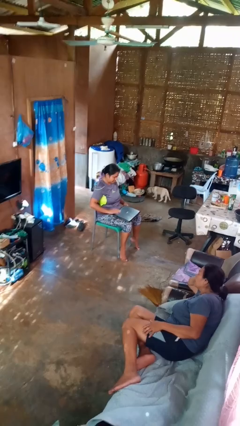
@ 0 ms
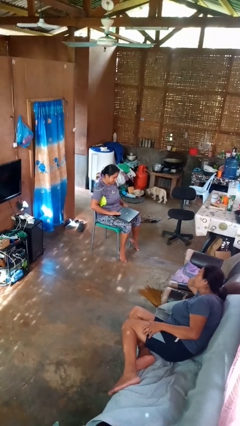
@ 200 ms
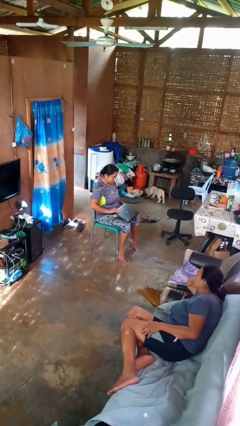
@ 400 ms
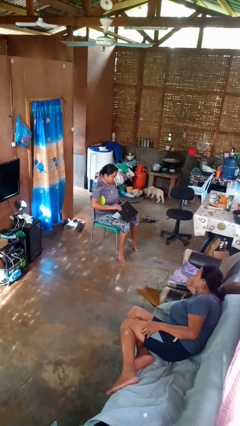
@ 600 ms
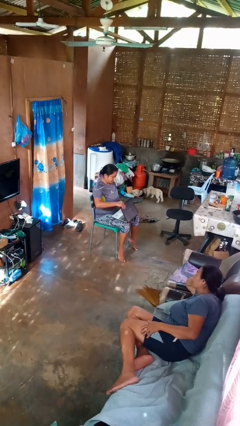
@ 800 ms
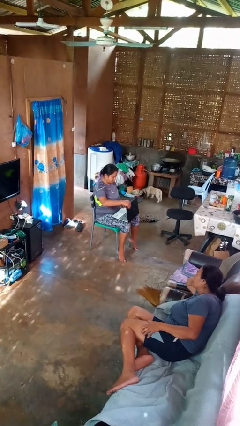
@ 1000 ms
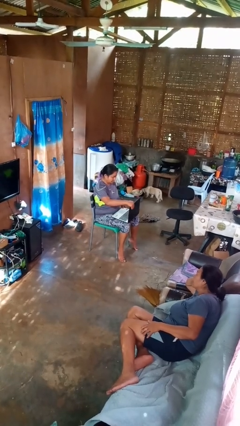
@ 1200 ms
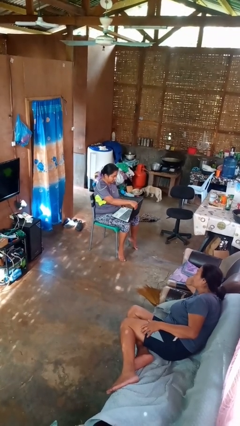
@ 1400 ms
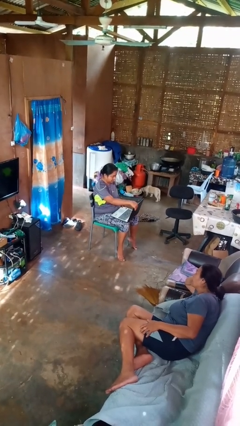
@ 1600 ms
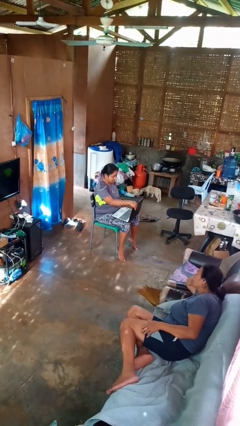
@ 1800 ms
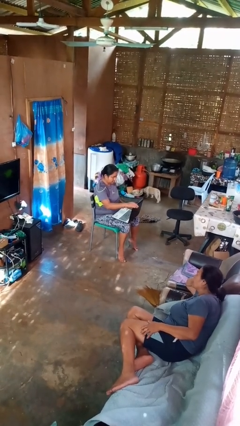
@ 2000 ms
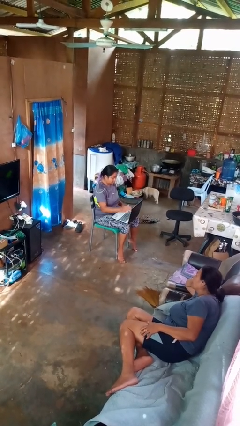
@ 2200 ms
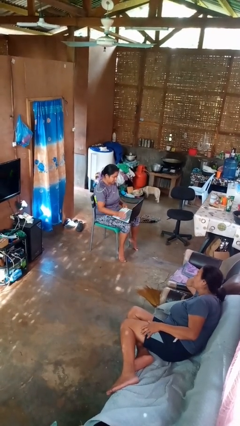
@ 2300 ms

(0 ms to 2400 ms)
person opens laptop

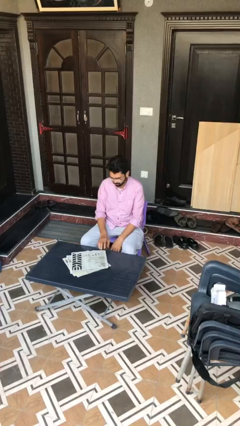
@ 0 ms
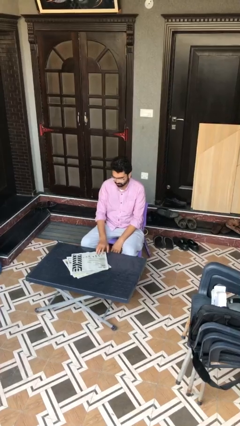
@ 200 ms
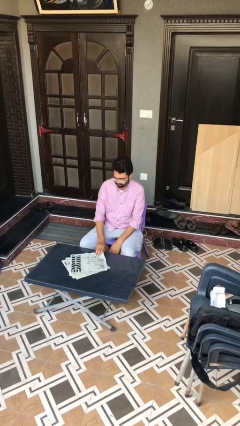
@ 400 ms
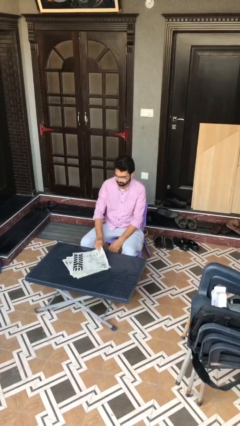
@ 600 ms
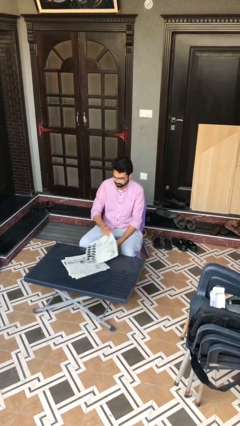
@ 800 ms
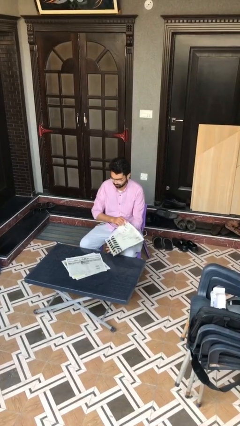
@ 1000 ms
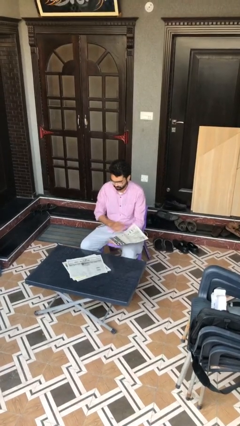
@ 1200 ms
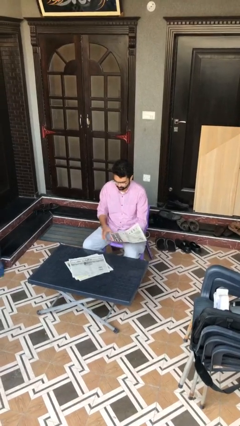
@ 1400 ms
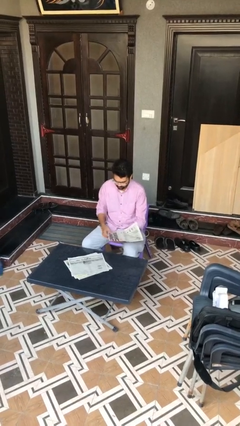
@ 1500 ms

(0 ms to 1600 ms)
person picks up object from table

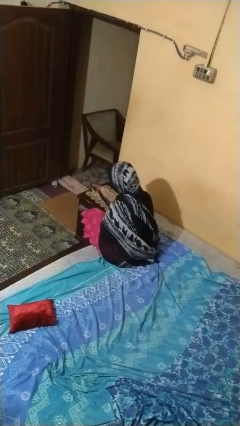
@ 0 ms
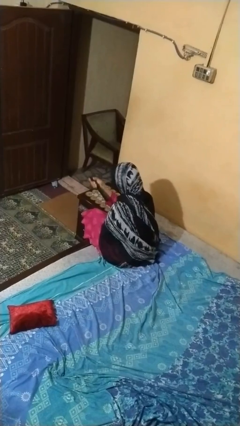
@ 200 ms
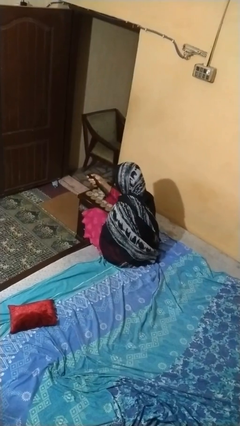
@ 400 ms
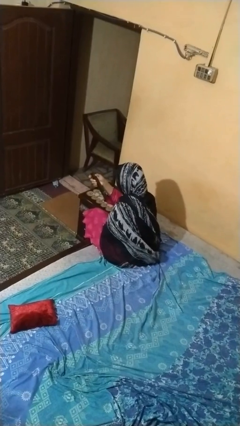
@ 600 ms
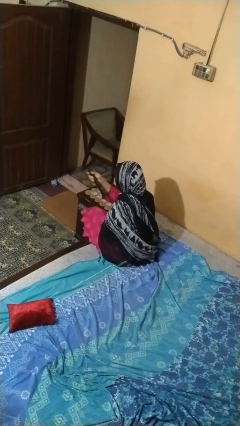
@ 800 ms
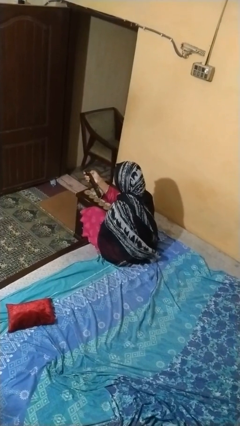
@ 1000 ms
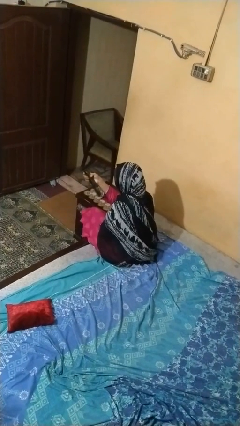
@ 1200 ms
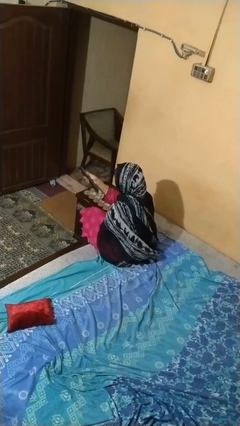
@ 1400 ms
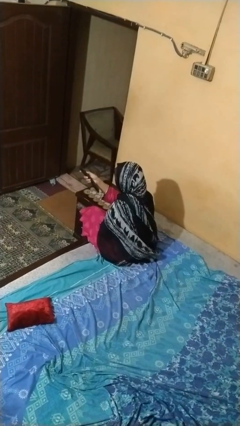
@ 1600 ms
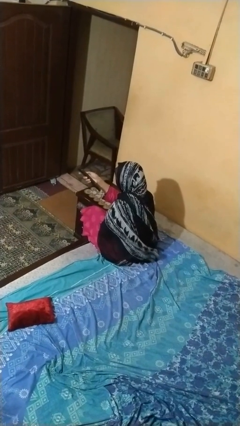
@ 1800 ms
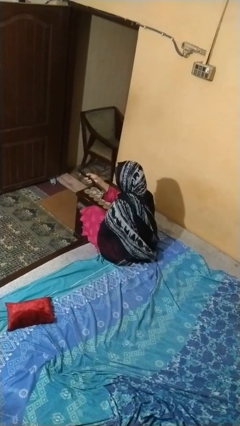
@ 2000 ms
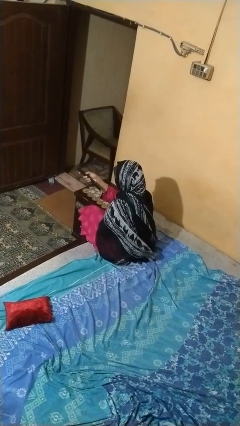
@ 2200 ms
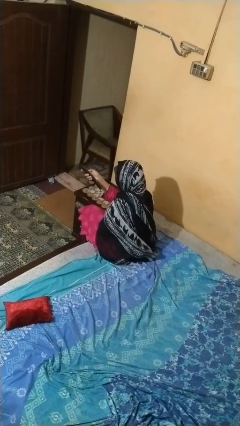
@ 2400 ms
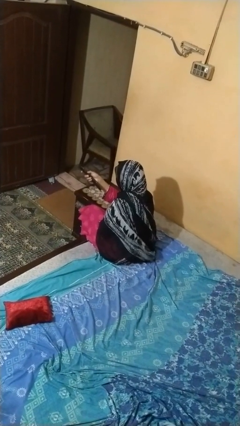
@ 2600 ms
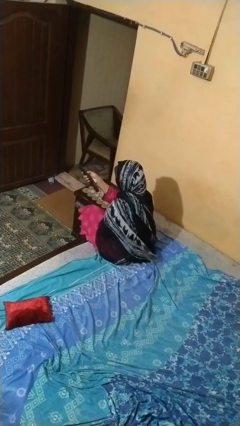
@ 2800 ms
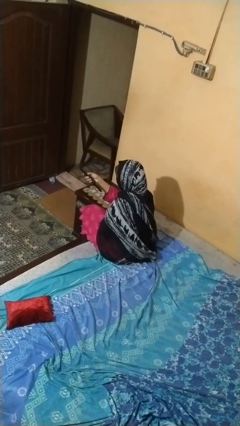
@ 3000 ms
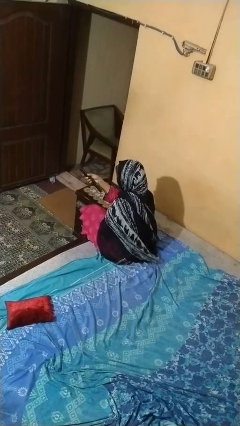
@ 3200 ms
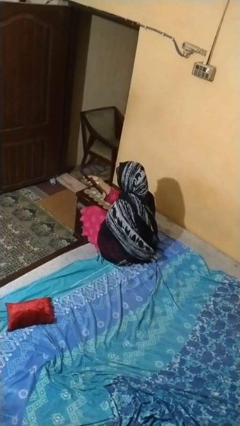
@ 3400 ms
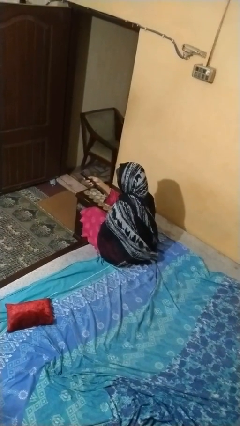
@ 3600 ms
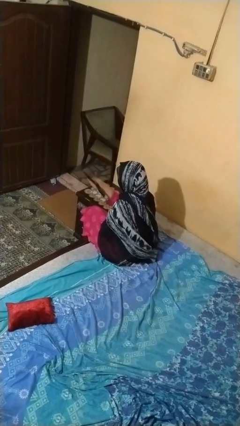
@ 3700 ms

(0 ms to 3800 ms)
person uses television remote

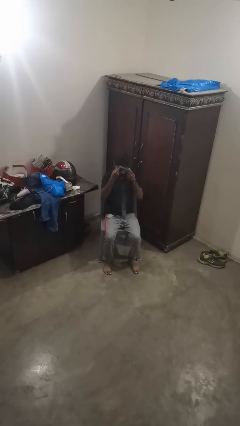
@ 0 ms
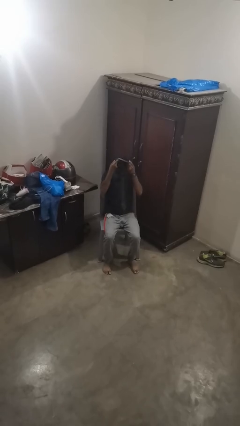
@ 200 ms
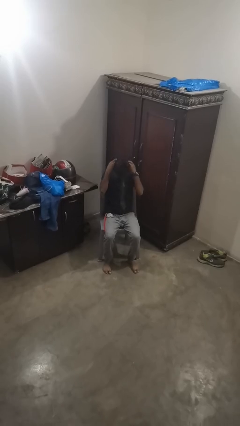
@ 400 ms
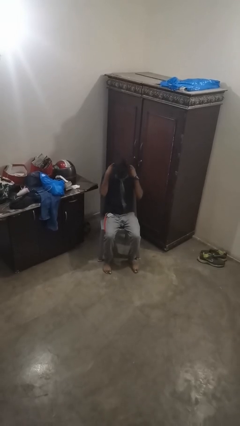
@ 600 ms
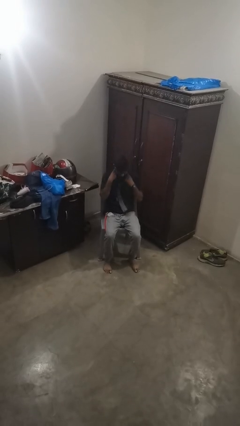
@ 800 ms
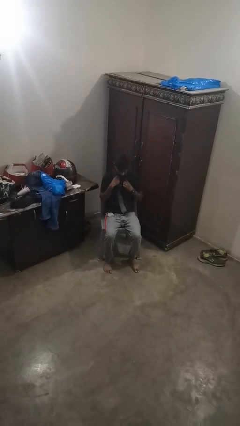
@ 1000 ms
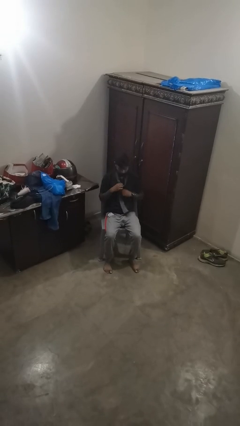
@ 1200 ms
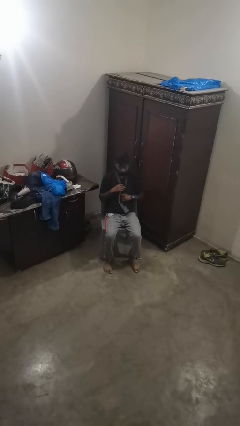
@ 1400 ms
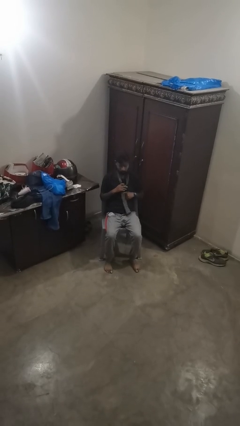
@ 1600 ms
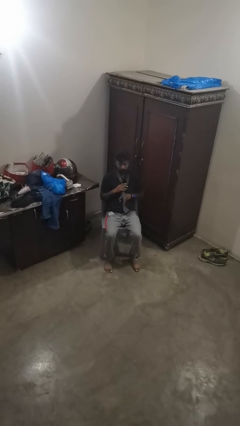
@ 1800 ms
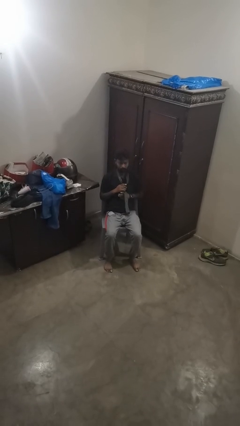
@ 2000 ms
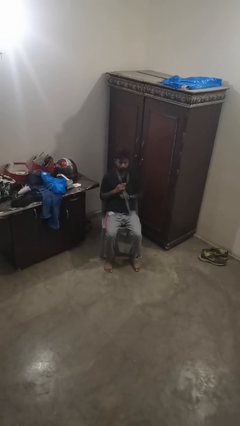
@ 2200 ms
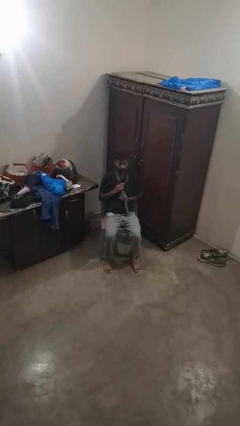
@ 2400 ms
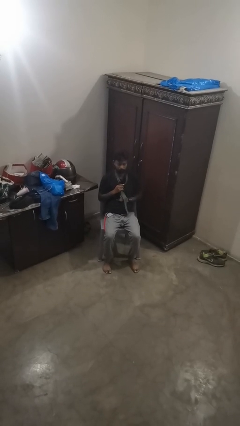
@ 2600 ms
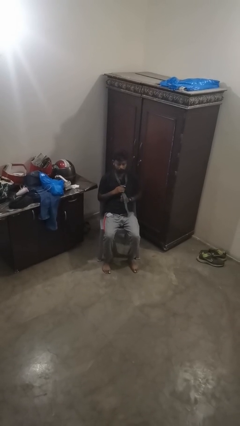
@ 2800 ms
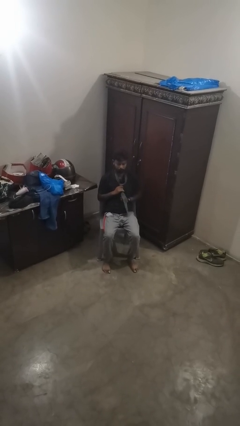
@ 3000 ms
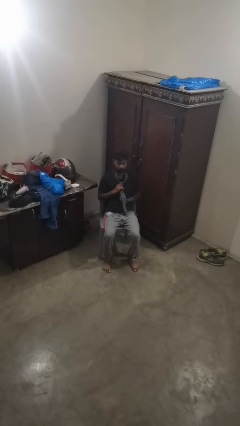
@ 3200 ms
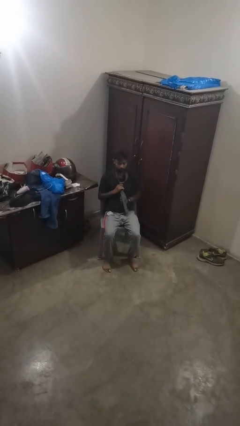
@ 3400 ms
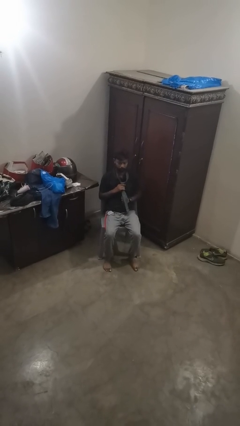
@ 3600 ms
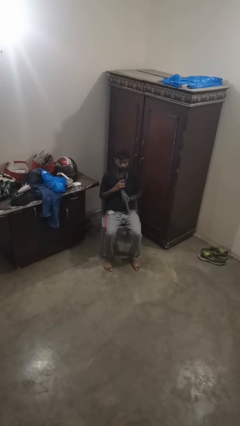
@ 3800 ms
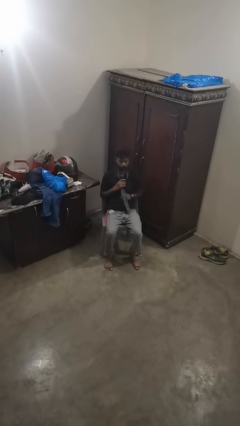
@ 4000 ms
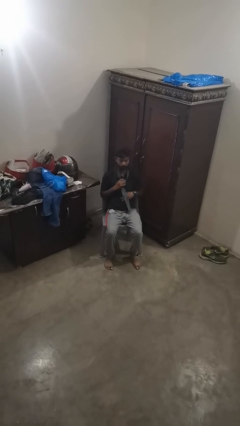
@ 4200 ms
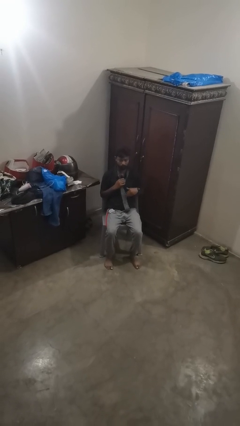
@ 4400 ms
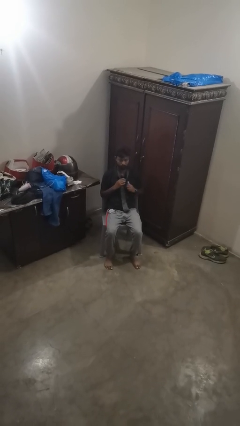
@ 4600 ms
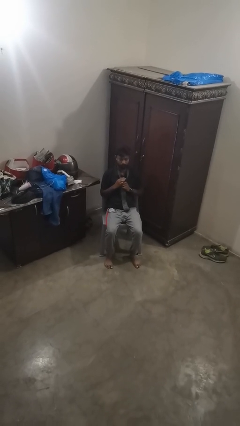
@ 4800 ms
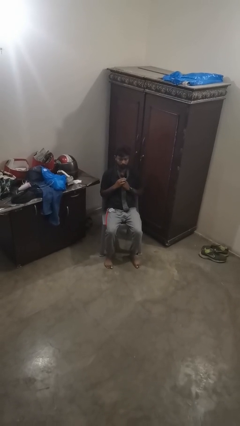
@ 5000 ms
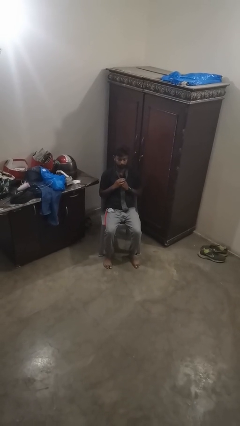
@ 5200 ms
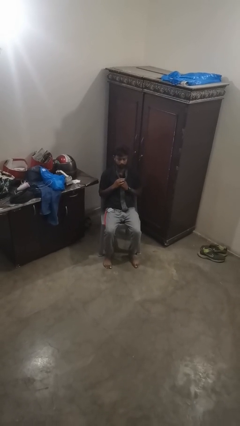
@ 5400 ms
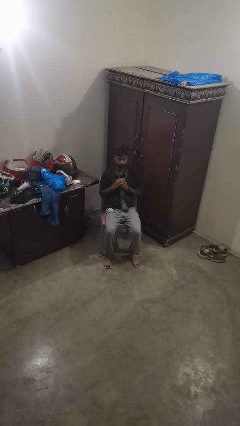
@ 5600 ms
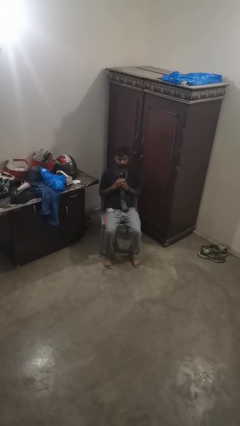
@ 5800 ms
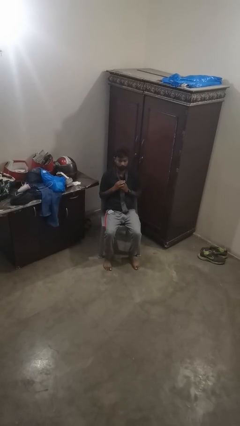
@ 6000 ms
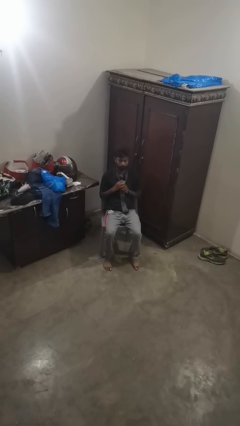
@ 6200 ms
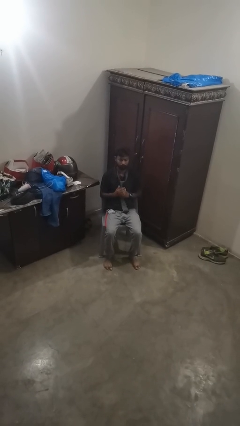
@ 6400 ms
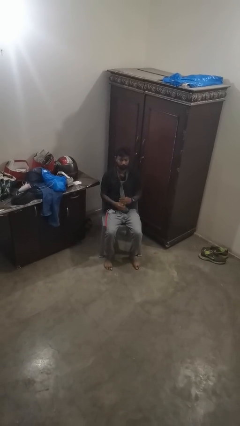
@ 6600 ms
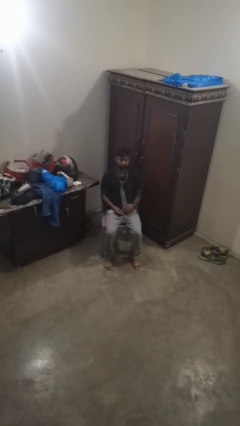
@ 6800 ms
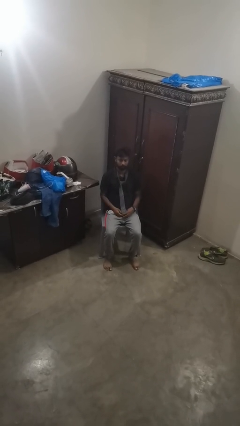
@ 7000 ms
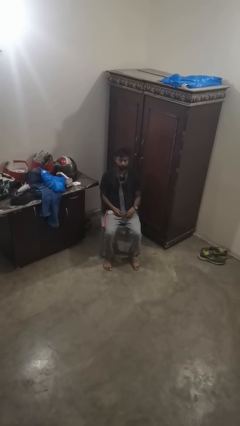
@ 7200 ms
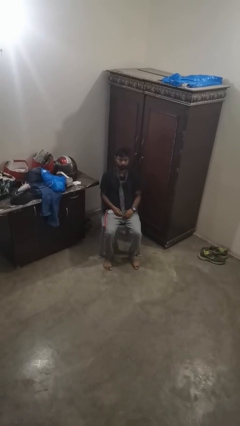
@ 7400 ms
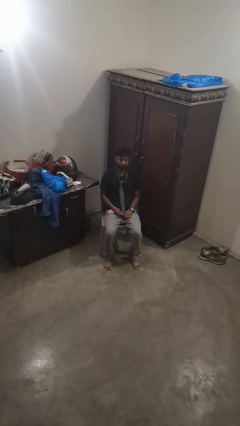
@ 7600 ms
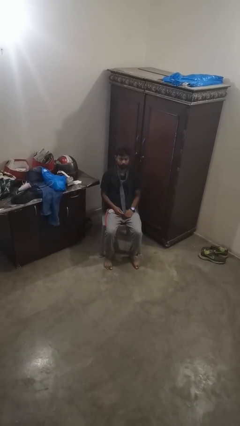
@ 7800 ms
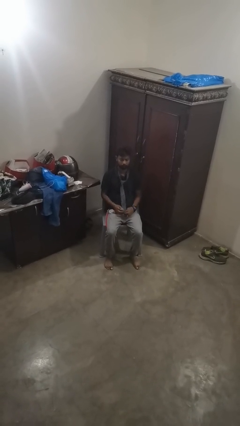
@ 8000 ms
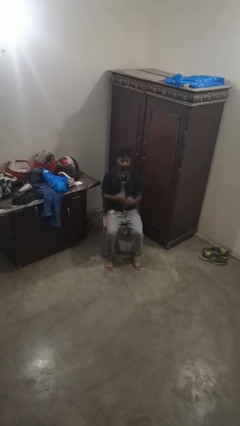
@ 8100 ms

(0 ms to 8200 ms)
person puts on necktie

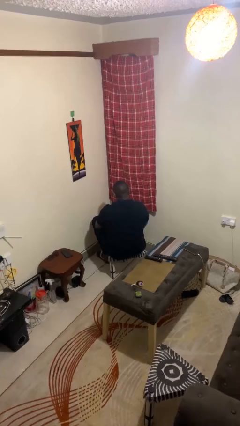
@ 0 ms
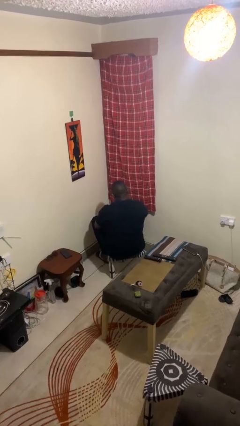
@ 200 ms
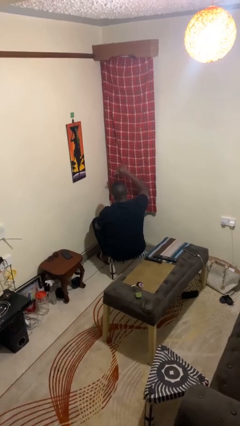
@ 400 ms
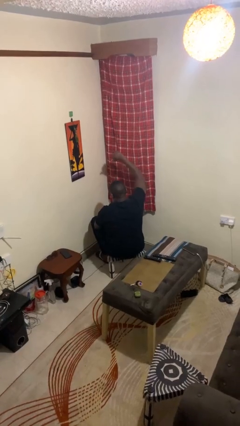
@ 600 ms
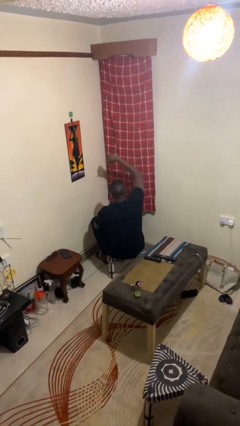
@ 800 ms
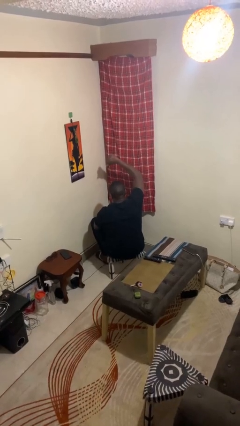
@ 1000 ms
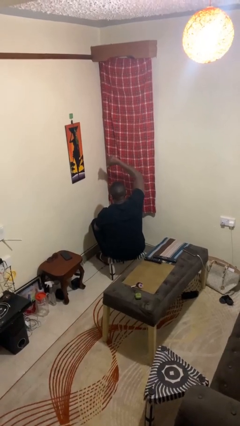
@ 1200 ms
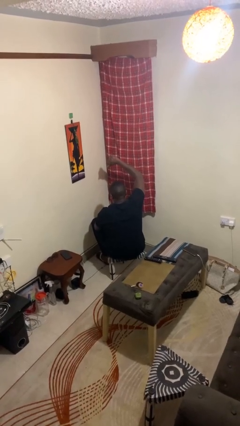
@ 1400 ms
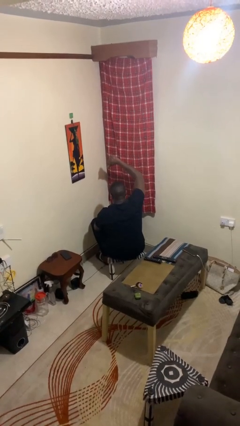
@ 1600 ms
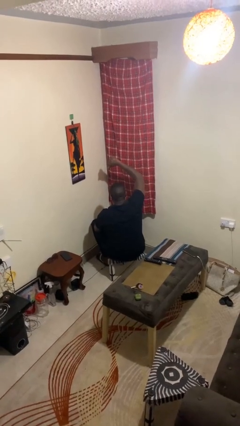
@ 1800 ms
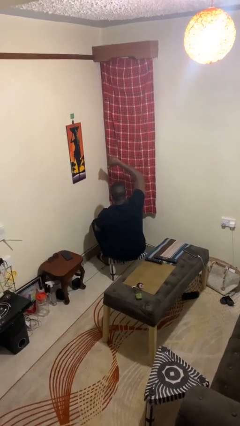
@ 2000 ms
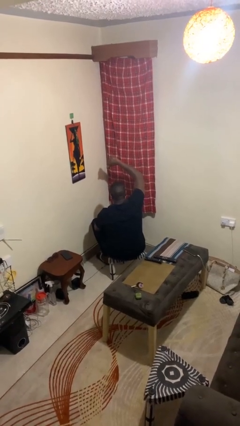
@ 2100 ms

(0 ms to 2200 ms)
person gestures thumbs down
